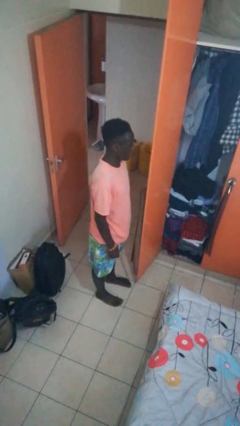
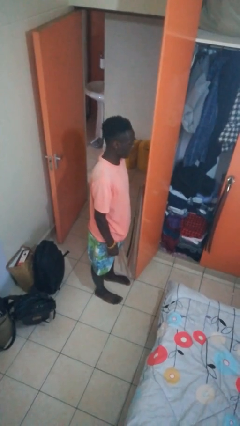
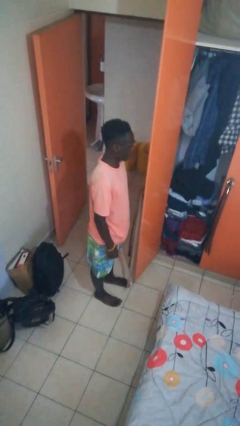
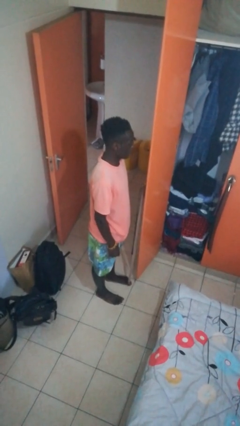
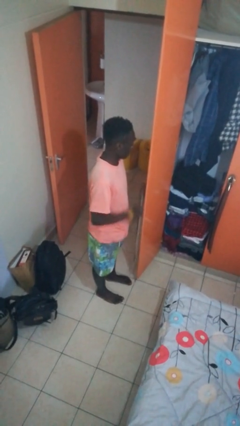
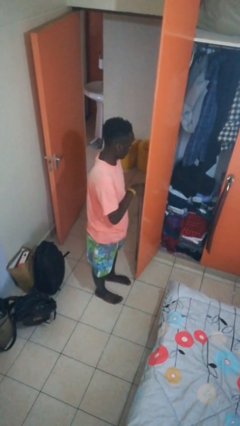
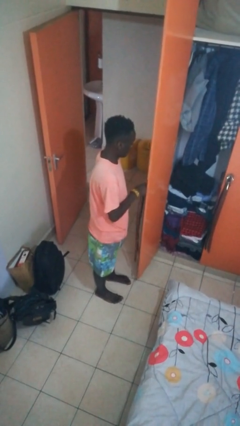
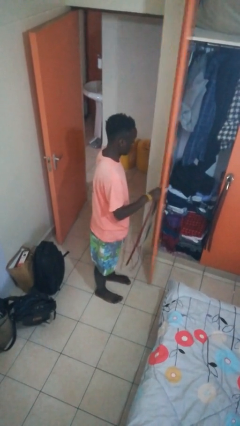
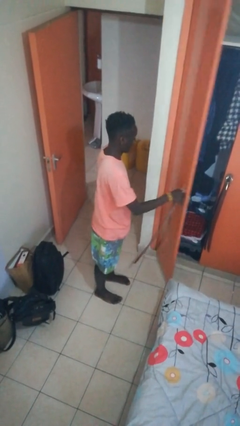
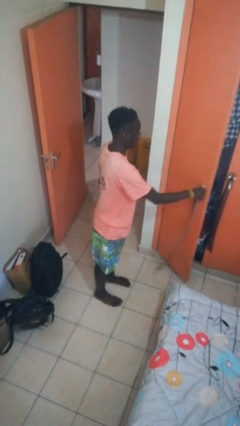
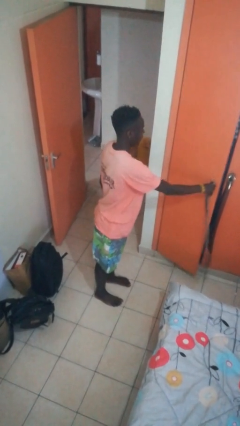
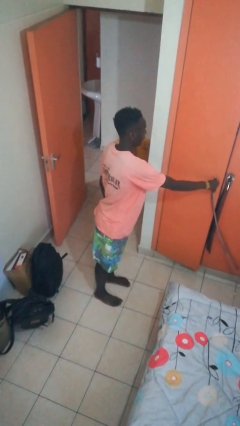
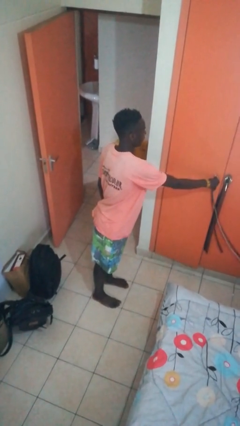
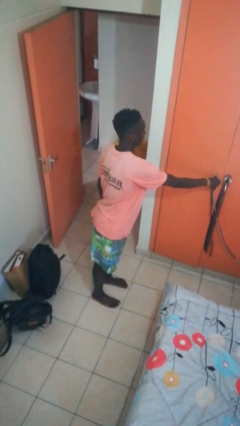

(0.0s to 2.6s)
person closes closet door

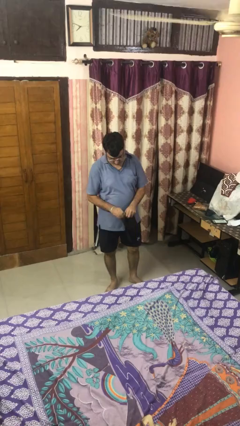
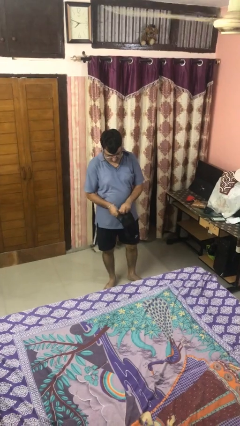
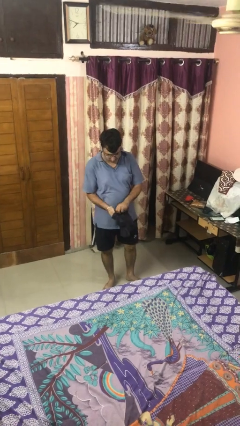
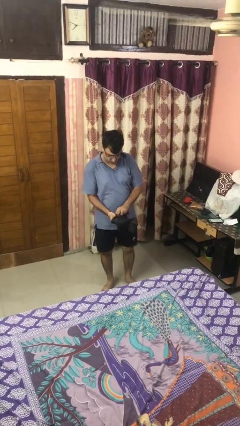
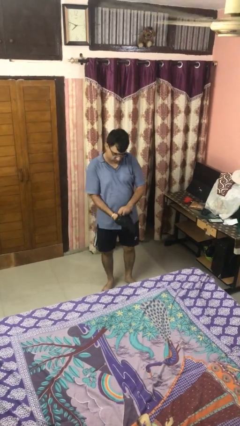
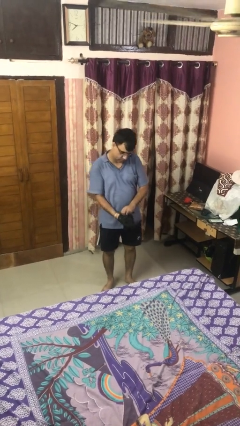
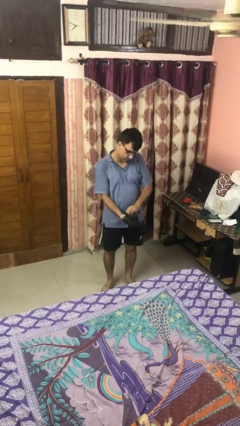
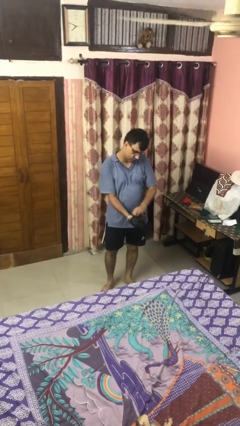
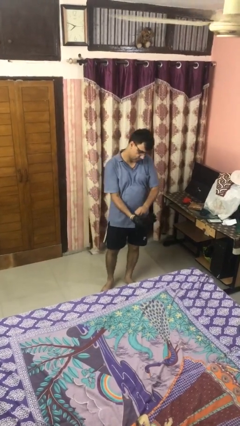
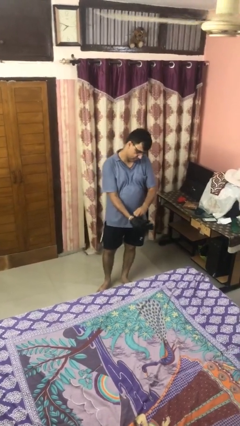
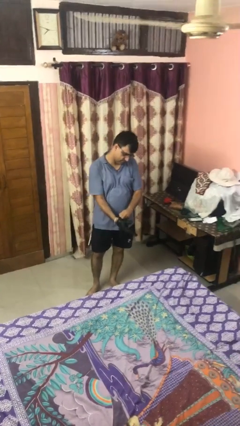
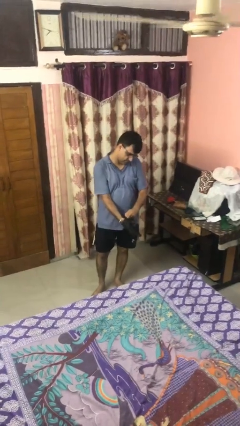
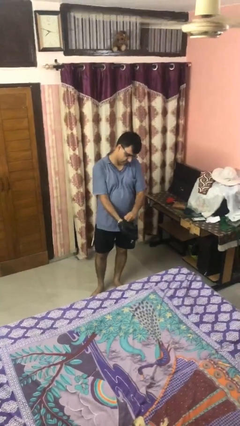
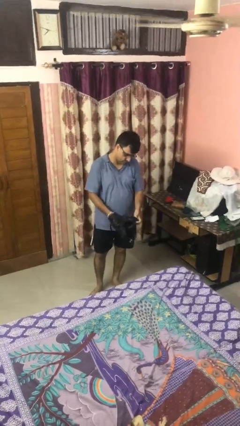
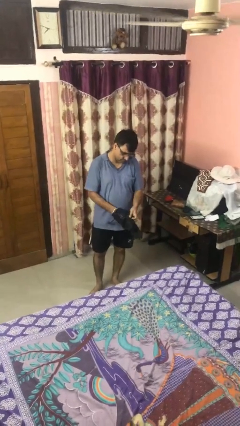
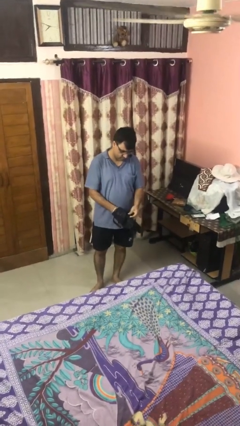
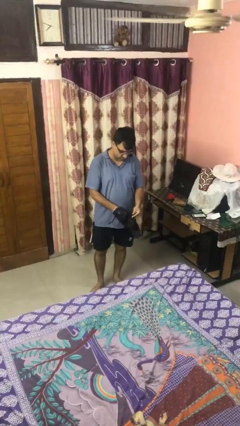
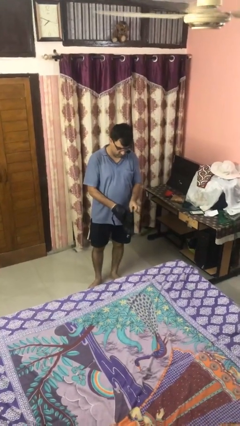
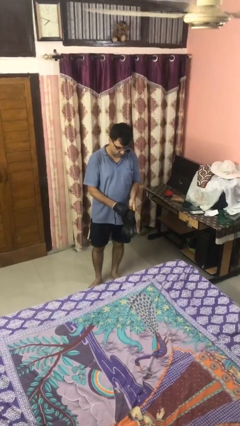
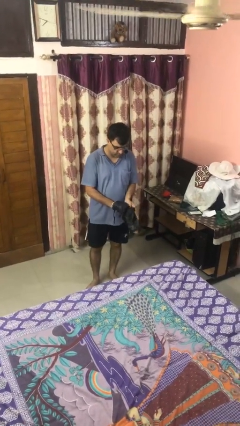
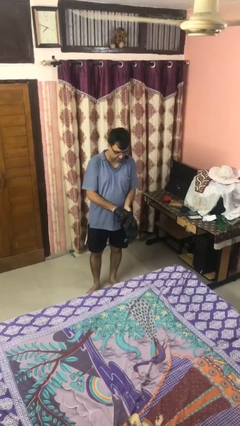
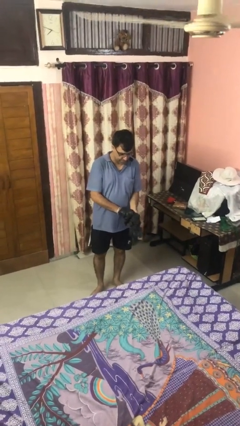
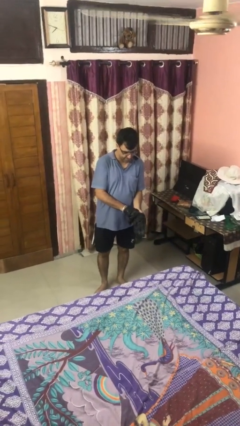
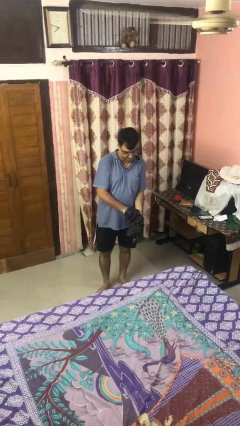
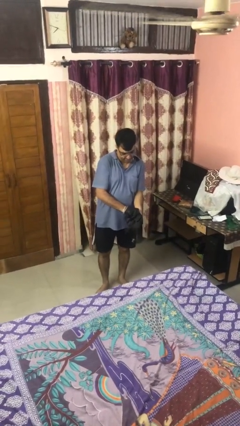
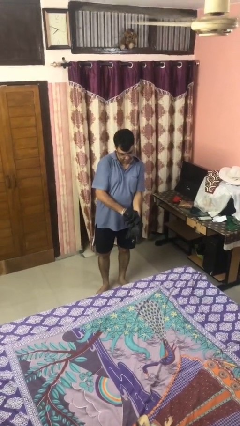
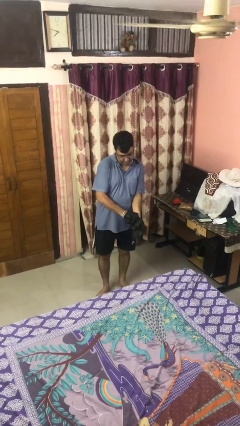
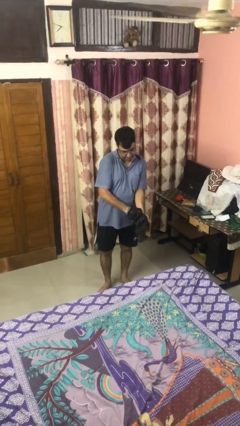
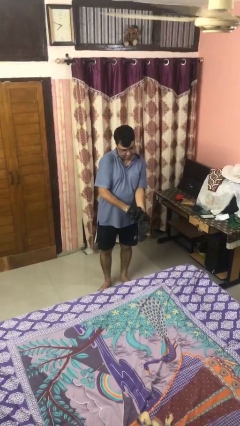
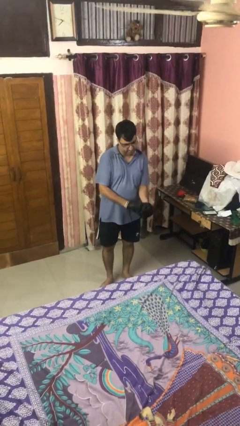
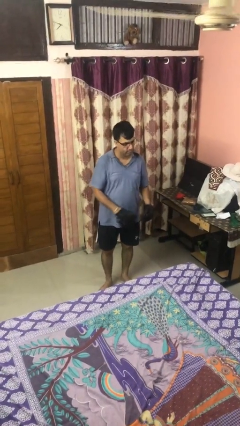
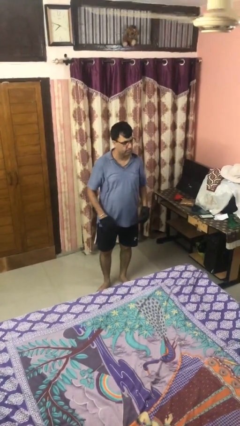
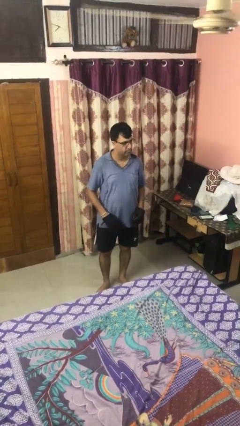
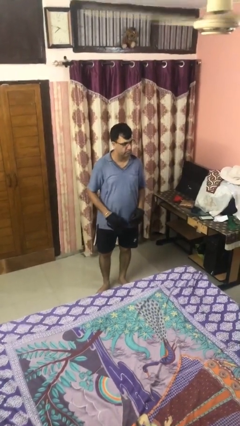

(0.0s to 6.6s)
person puts on gloves

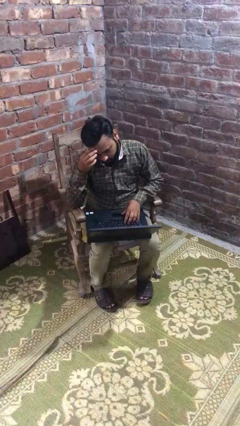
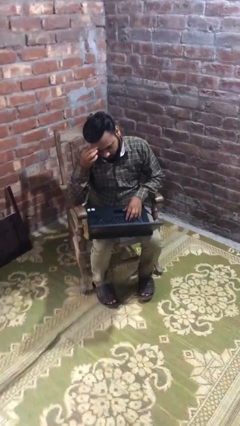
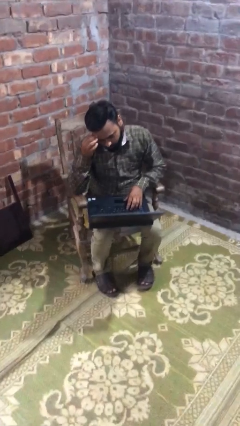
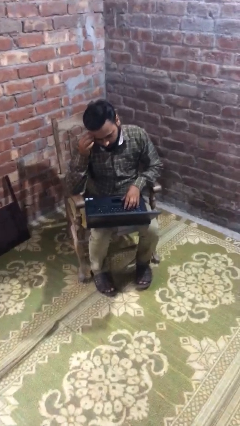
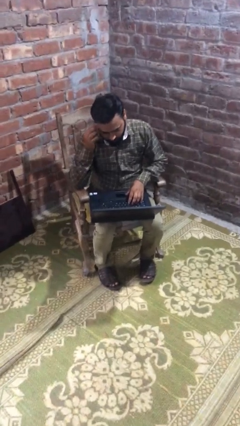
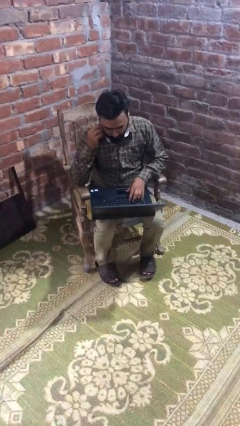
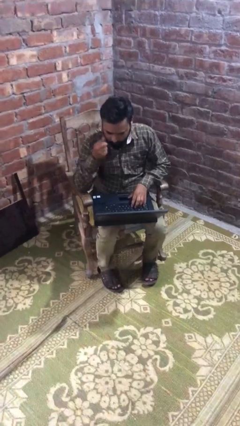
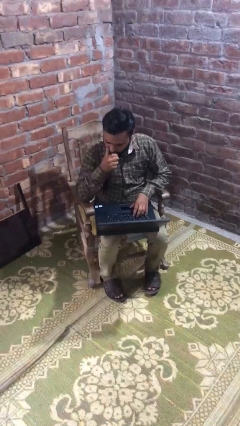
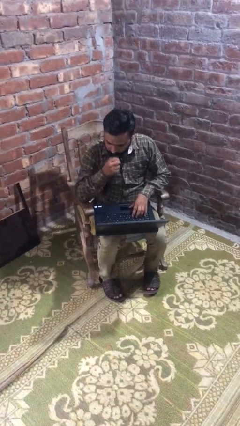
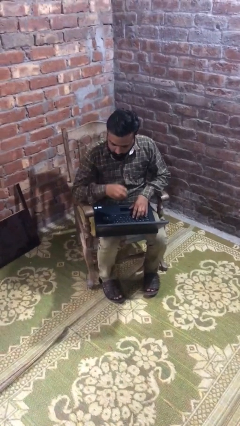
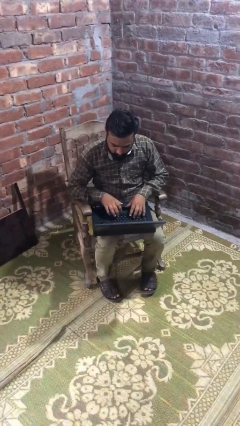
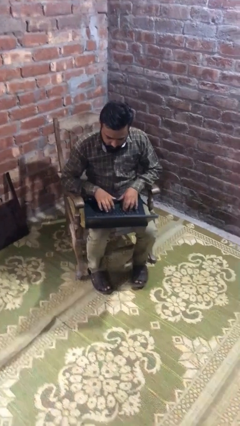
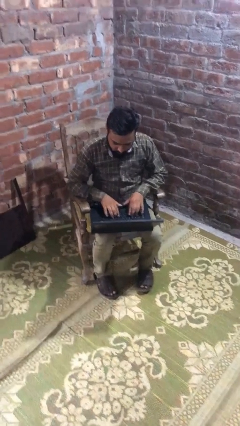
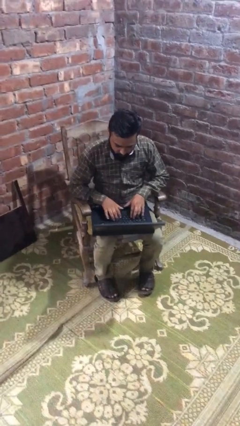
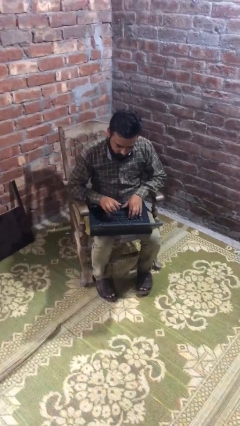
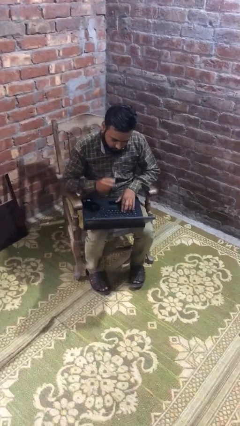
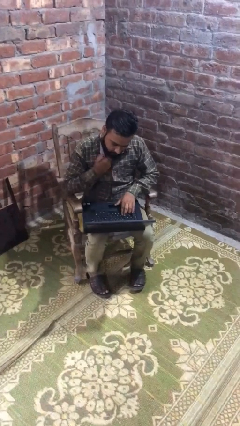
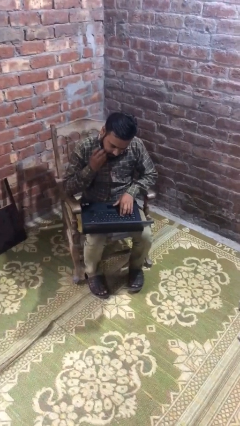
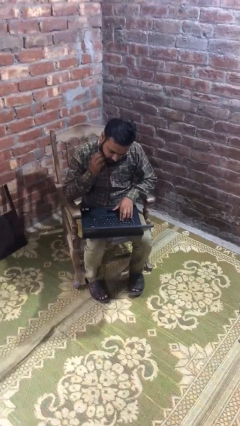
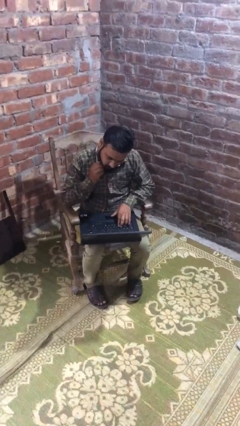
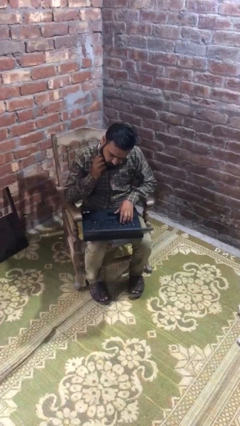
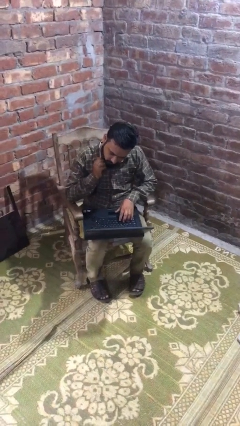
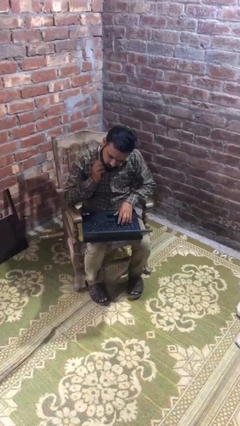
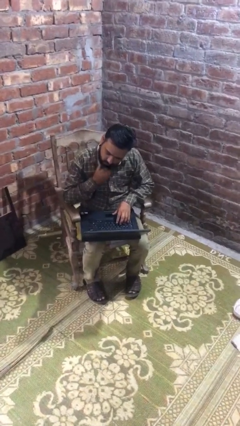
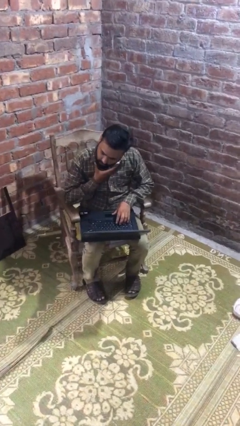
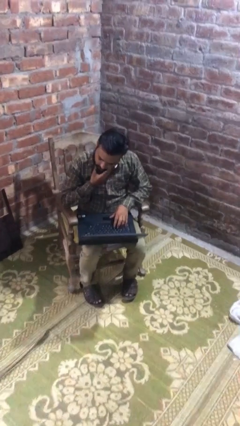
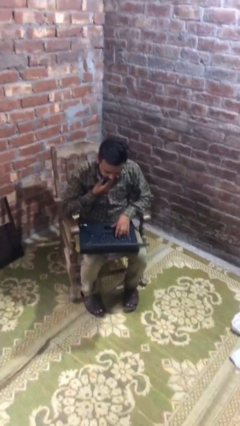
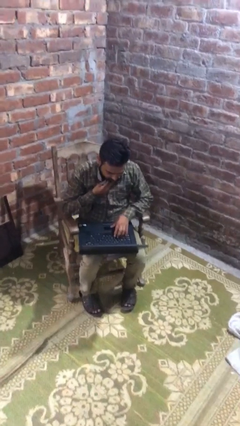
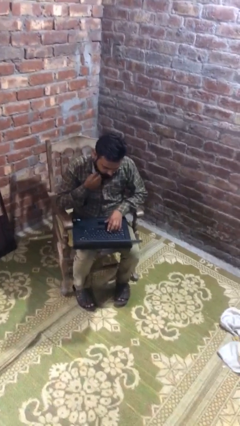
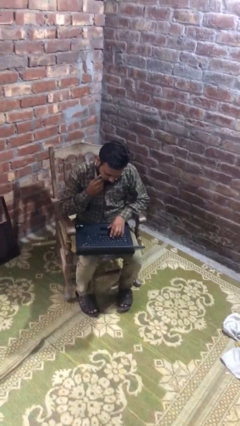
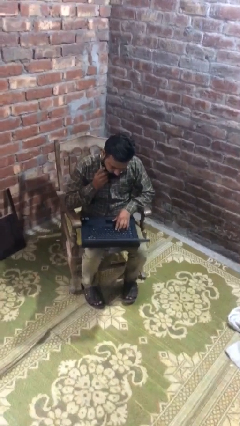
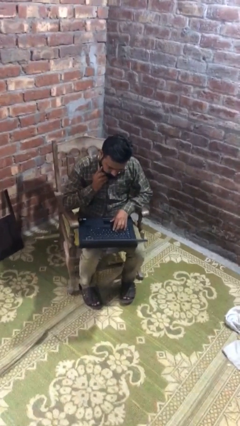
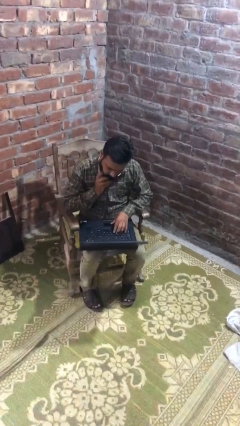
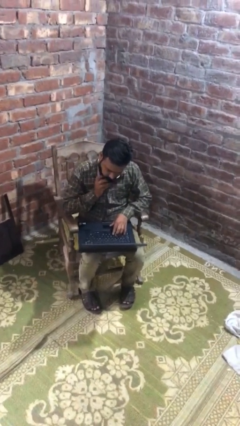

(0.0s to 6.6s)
person interacts with laptop

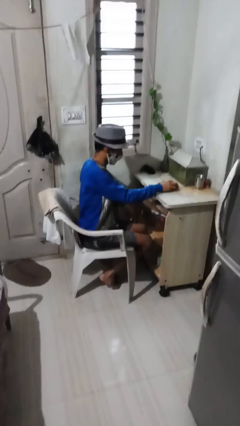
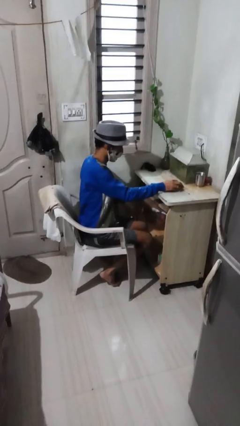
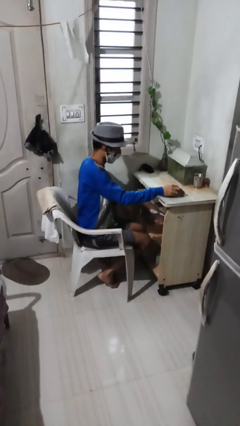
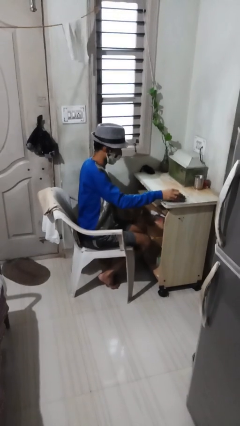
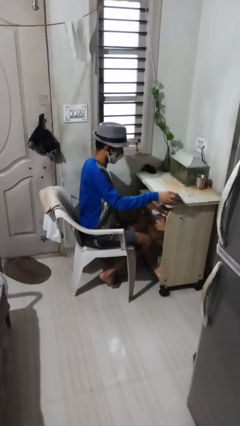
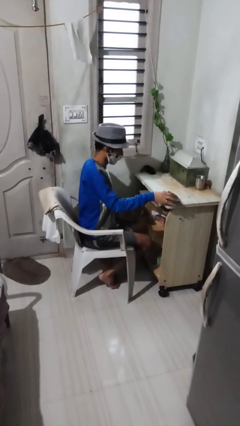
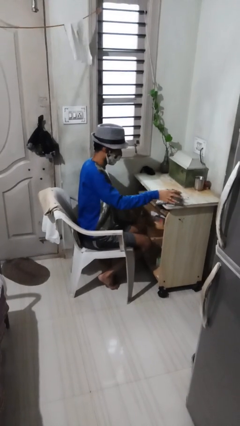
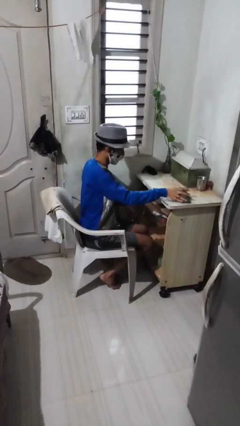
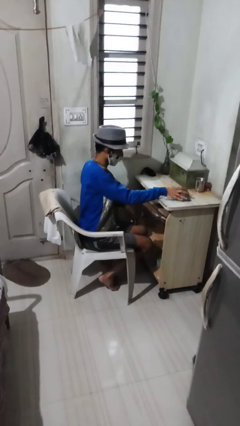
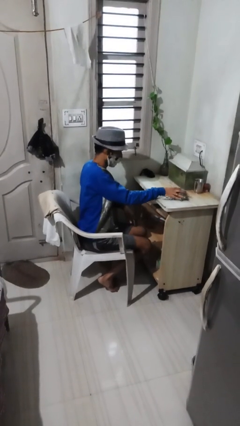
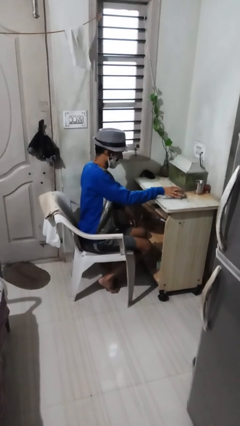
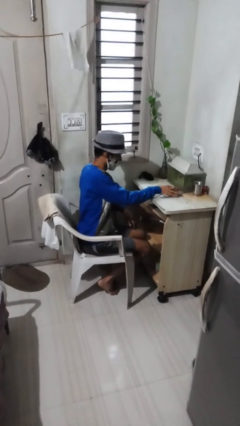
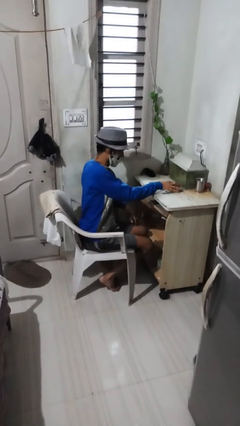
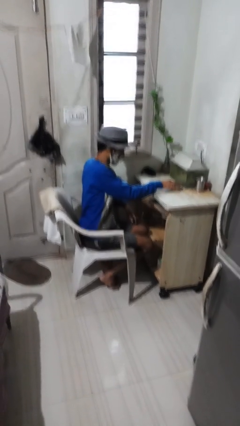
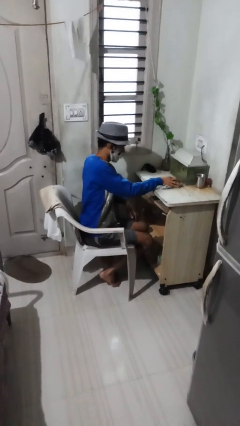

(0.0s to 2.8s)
person cleans table with rag
